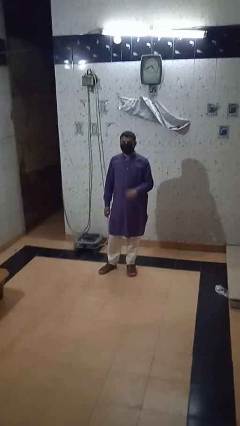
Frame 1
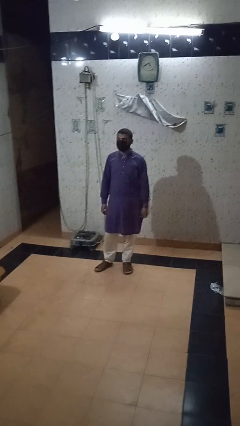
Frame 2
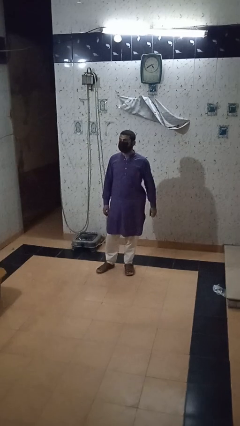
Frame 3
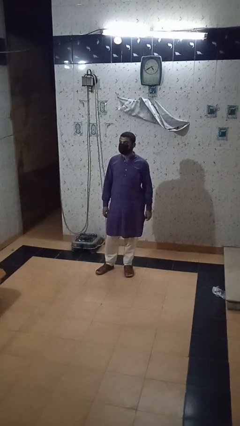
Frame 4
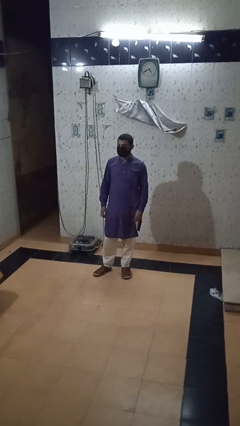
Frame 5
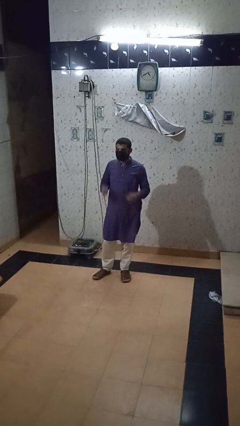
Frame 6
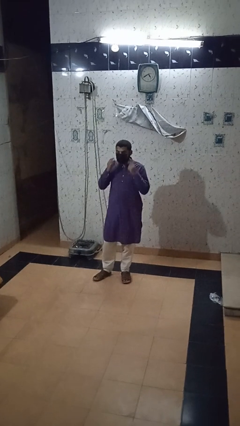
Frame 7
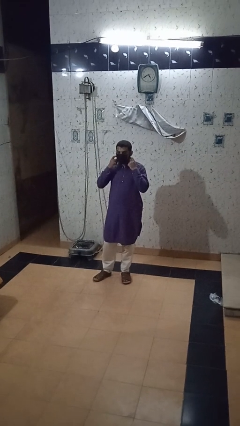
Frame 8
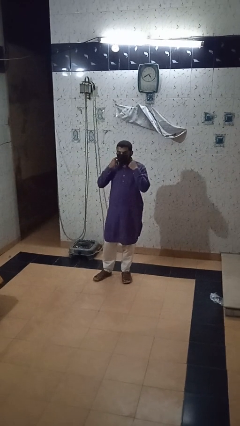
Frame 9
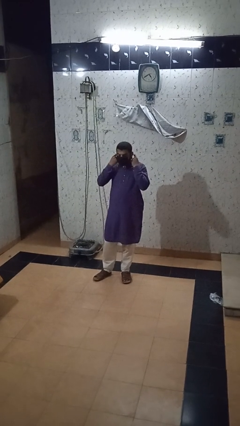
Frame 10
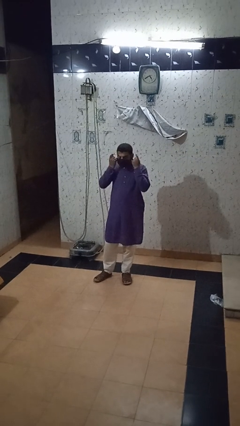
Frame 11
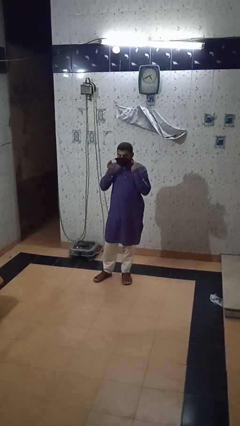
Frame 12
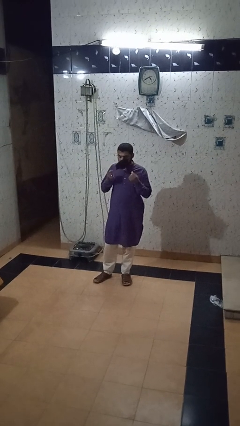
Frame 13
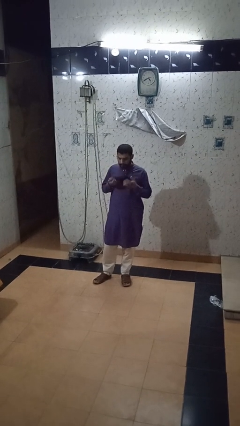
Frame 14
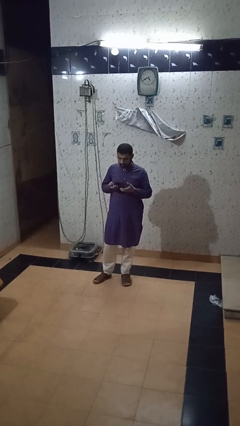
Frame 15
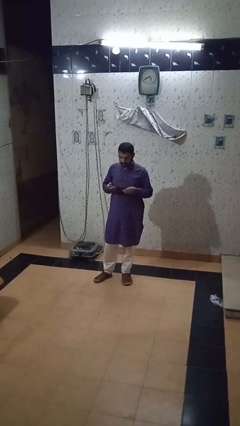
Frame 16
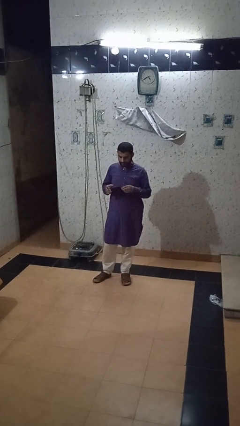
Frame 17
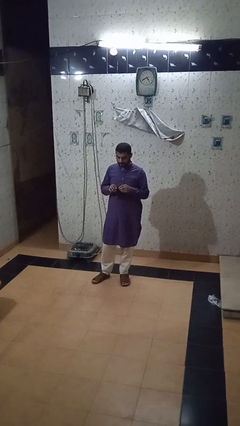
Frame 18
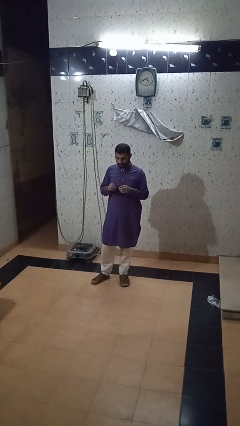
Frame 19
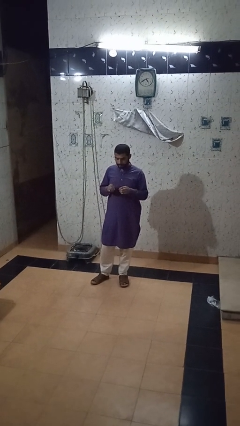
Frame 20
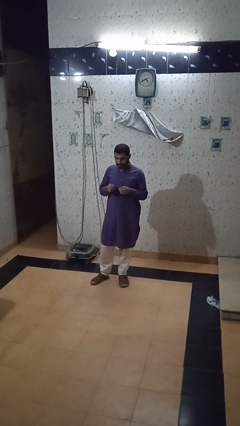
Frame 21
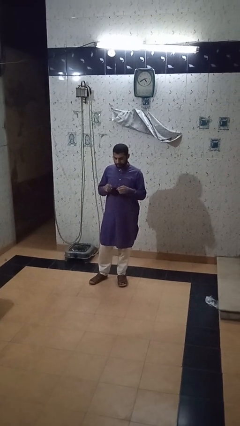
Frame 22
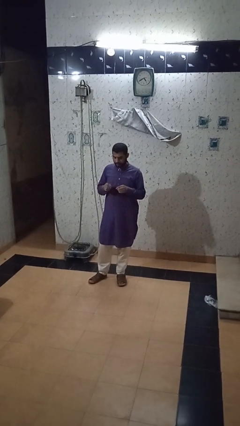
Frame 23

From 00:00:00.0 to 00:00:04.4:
person takes off facemask

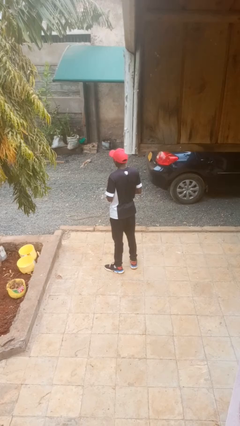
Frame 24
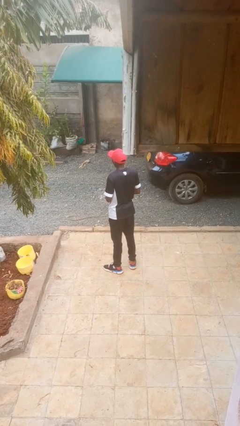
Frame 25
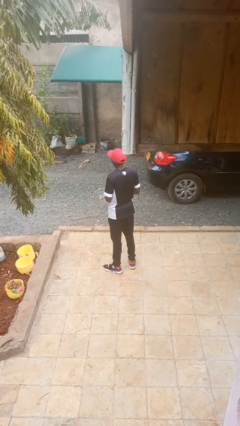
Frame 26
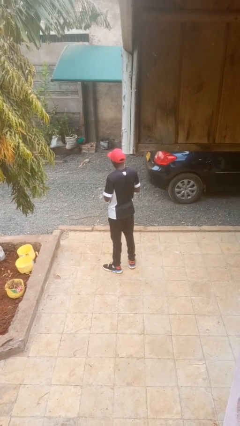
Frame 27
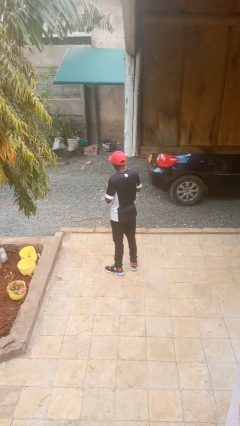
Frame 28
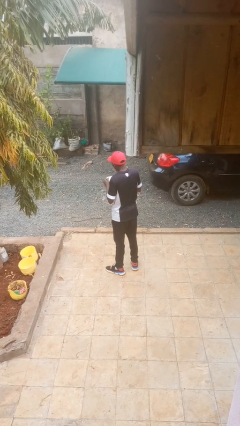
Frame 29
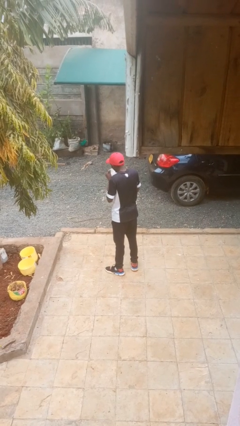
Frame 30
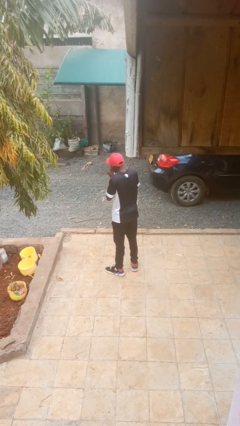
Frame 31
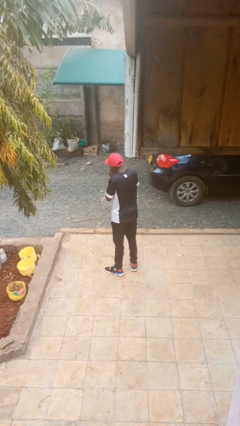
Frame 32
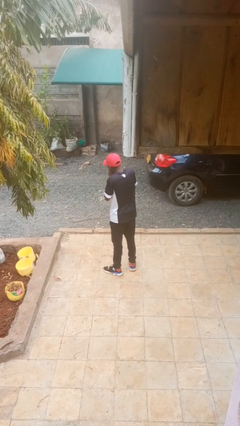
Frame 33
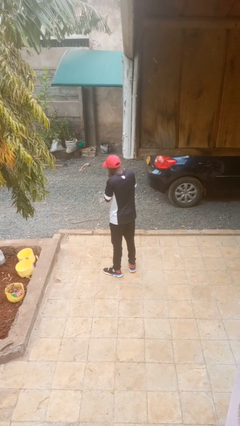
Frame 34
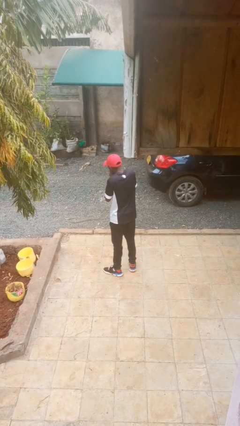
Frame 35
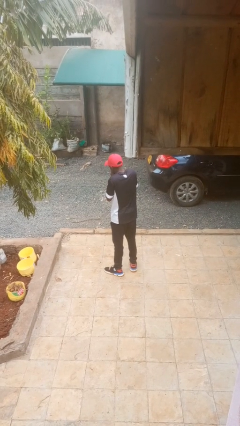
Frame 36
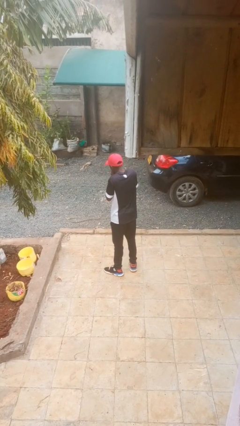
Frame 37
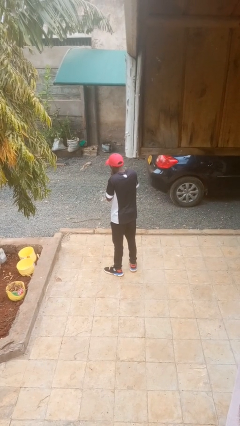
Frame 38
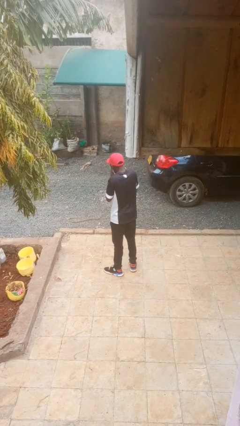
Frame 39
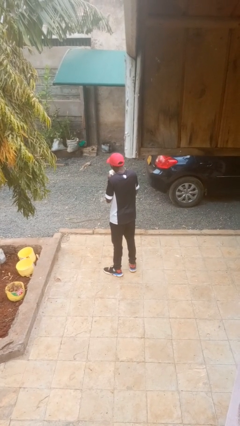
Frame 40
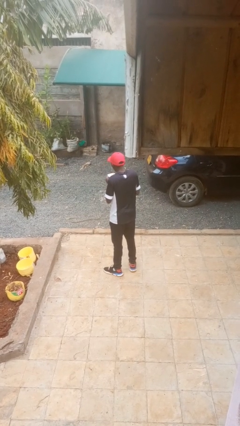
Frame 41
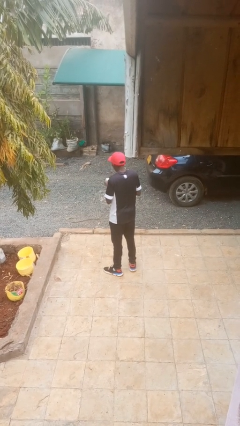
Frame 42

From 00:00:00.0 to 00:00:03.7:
person blows nose

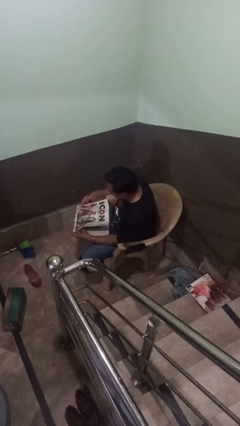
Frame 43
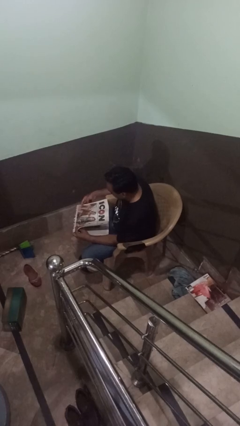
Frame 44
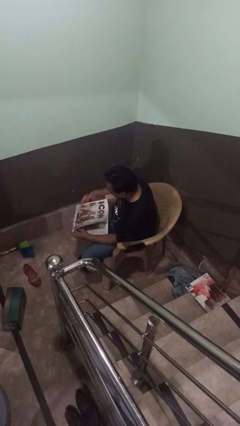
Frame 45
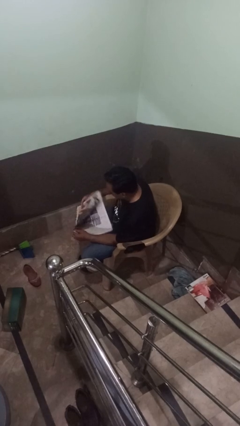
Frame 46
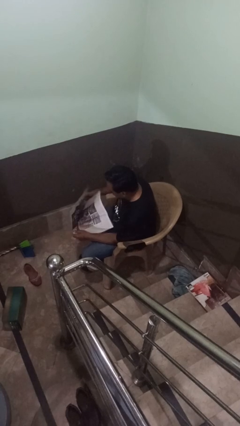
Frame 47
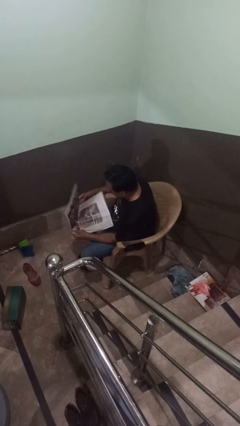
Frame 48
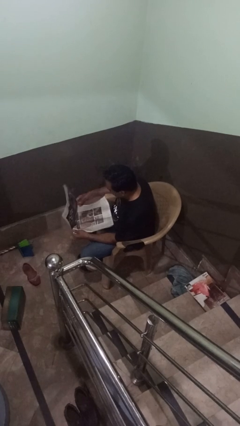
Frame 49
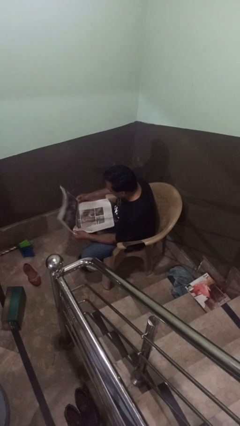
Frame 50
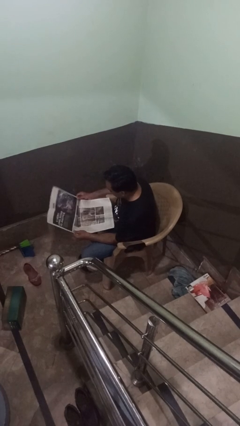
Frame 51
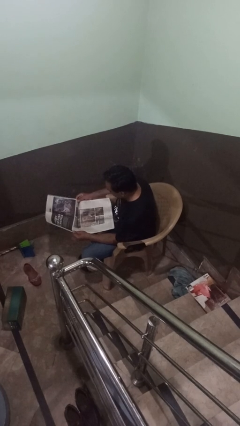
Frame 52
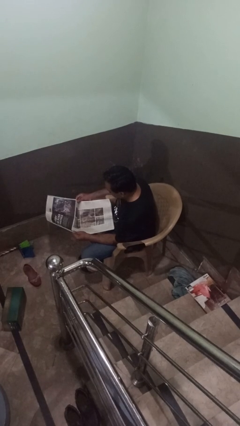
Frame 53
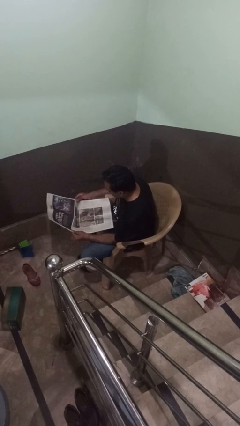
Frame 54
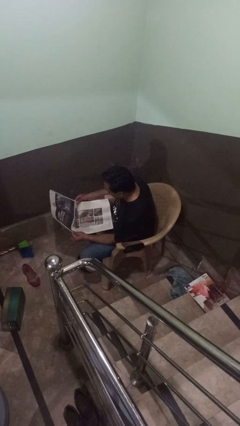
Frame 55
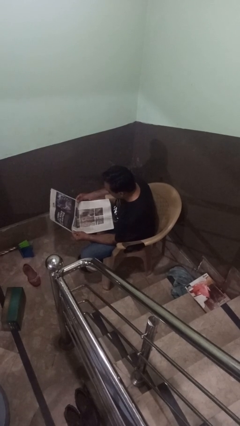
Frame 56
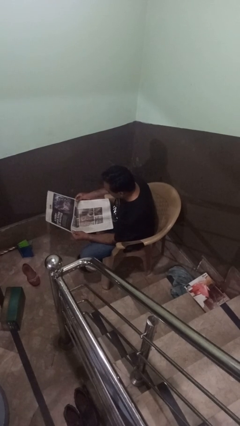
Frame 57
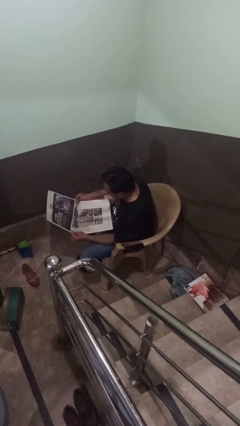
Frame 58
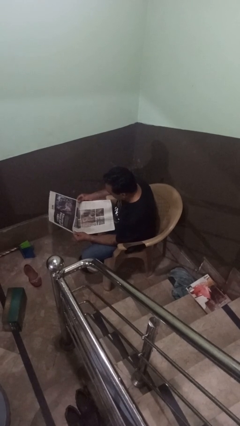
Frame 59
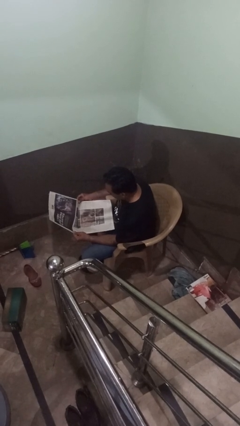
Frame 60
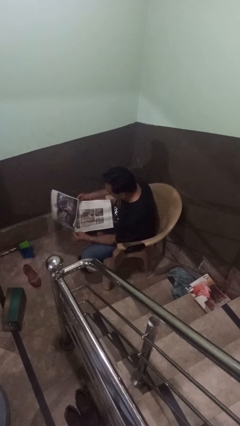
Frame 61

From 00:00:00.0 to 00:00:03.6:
person reads newspaper

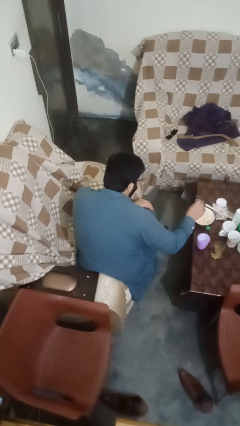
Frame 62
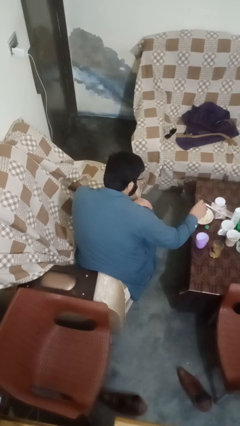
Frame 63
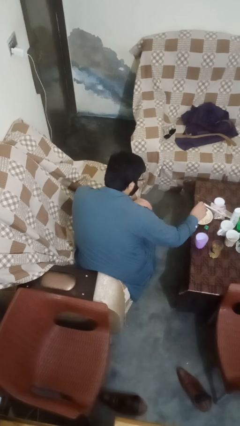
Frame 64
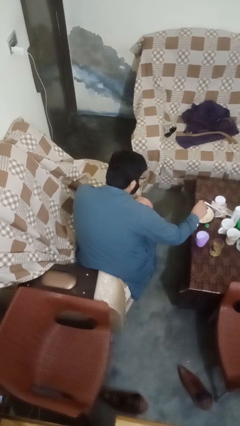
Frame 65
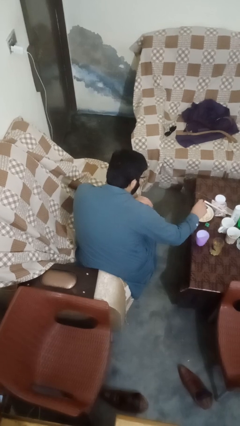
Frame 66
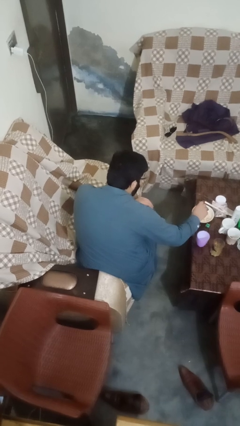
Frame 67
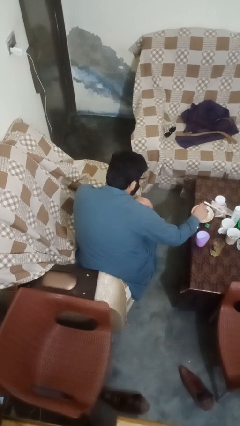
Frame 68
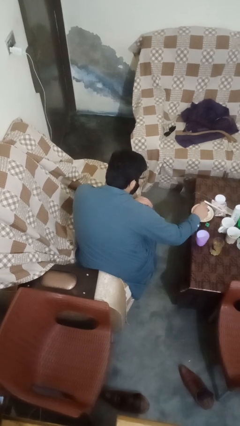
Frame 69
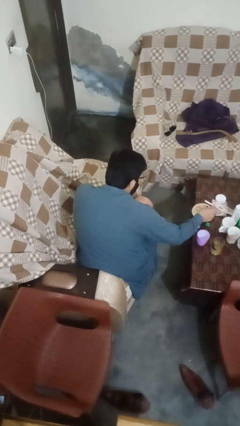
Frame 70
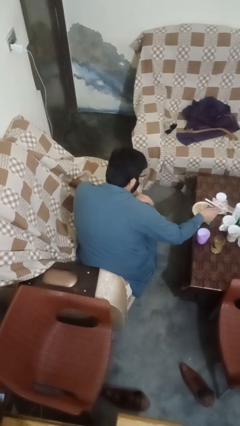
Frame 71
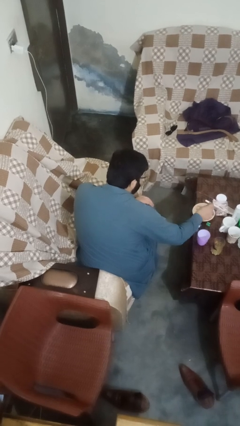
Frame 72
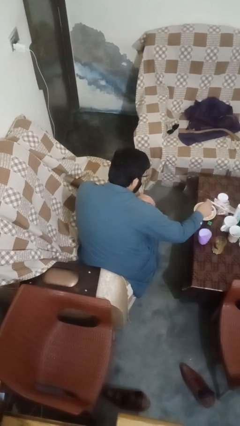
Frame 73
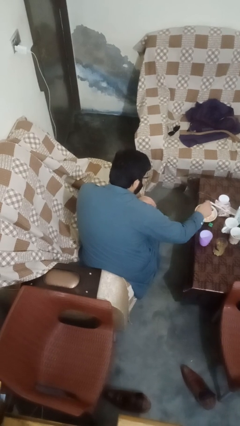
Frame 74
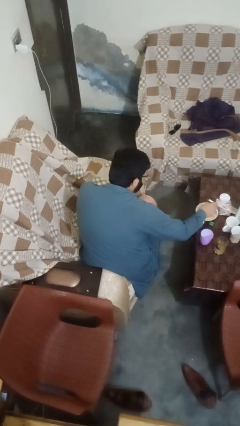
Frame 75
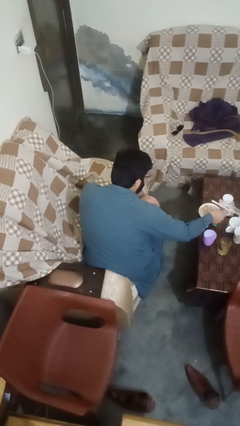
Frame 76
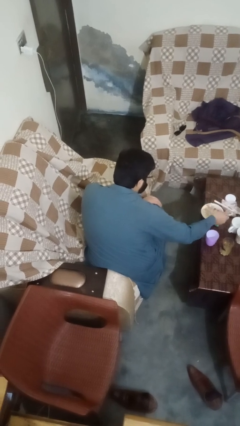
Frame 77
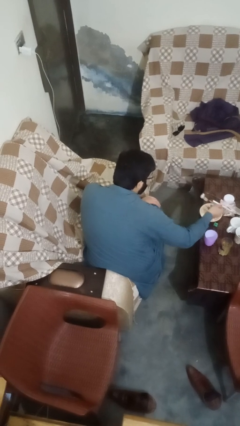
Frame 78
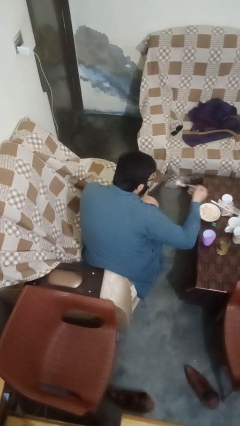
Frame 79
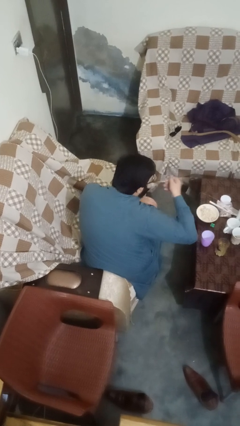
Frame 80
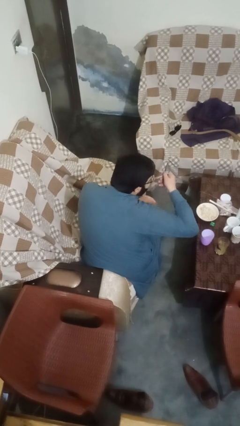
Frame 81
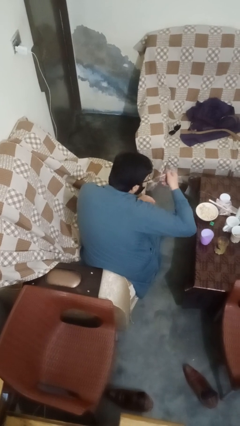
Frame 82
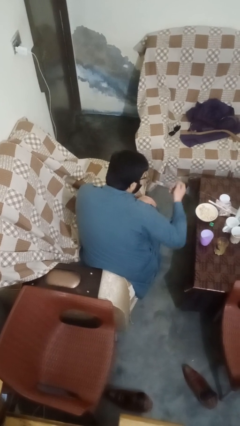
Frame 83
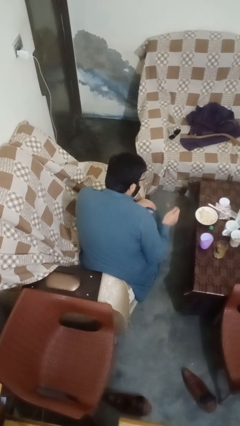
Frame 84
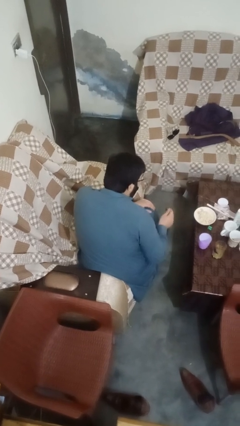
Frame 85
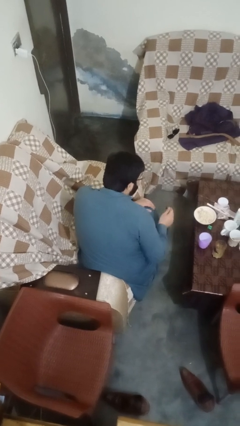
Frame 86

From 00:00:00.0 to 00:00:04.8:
person eats with utensil

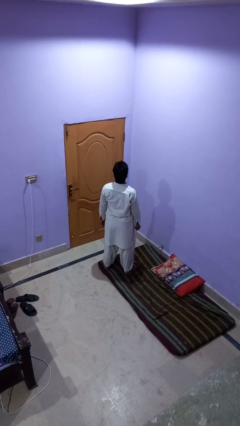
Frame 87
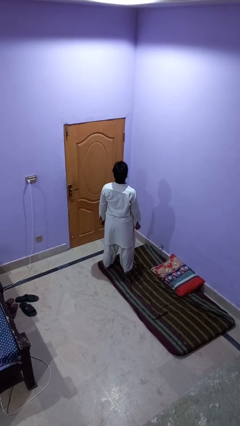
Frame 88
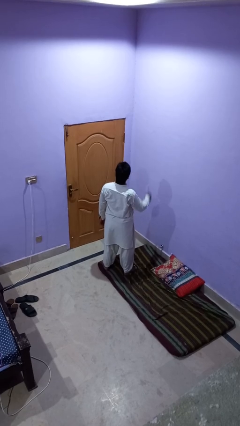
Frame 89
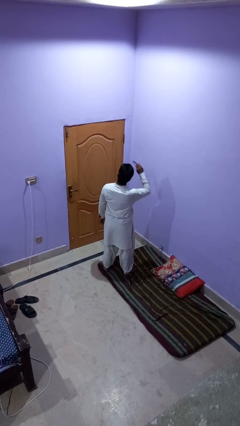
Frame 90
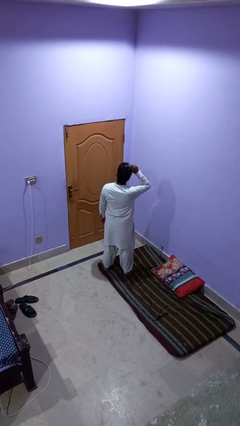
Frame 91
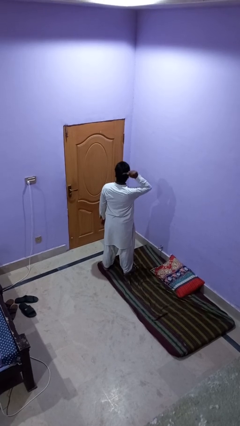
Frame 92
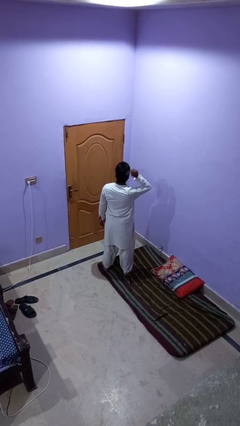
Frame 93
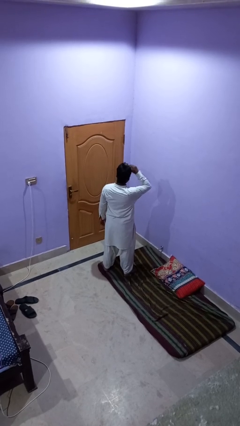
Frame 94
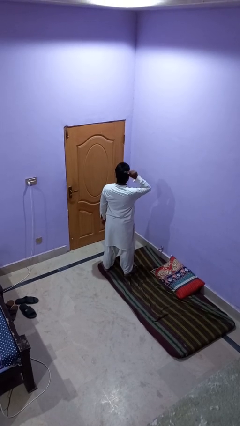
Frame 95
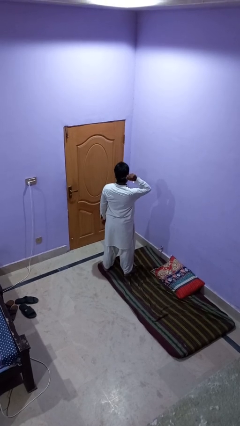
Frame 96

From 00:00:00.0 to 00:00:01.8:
person brushes hair
